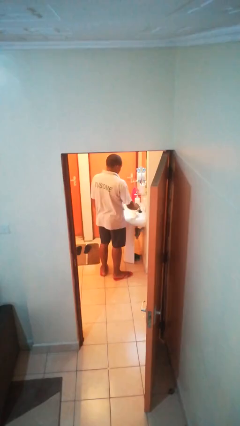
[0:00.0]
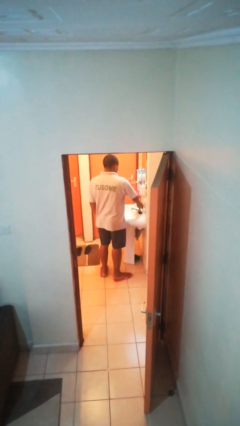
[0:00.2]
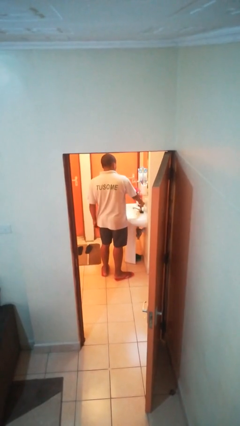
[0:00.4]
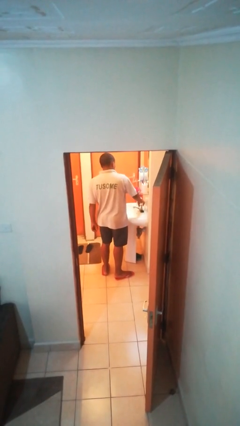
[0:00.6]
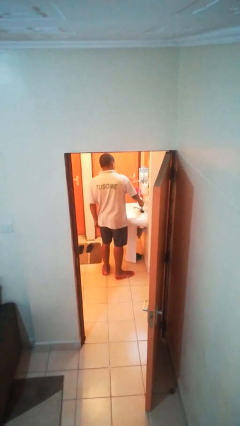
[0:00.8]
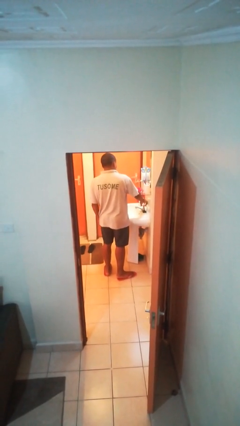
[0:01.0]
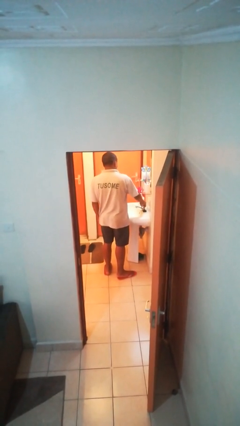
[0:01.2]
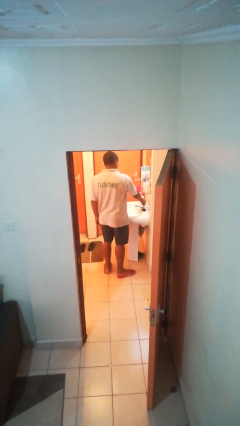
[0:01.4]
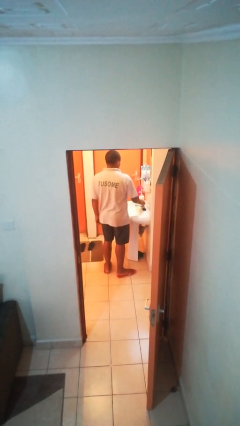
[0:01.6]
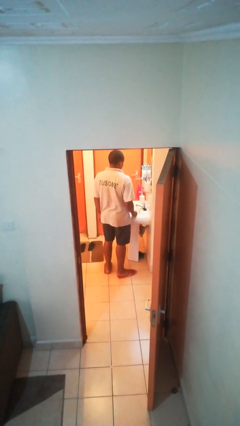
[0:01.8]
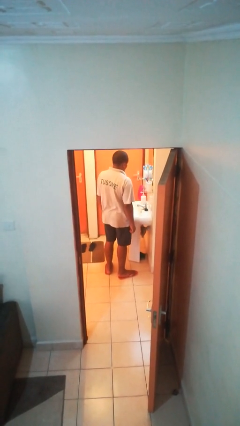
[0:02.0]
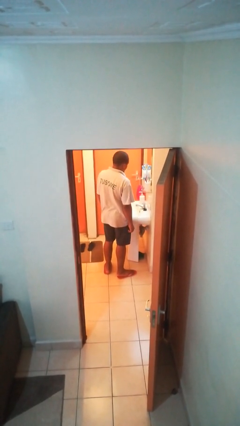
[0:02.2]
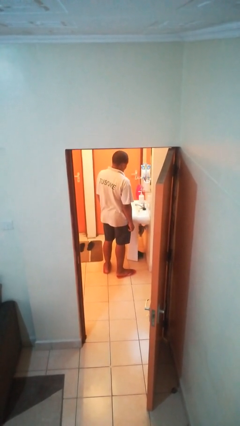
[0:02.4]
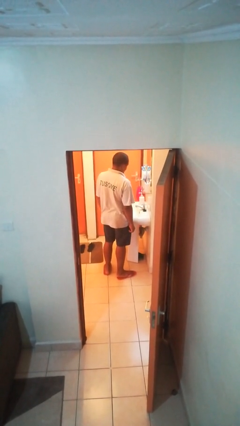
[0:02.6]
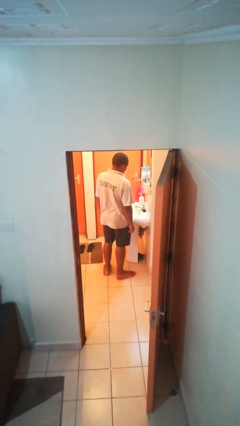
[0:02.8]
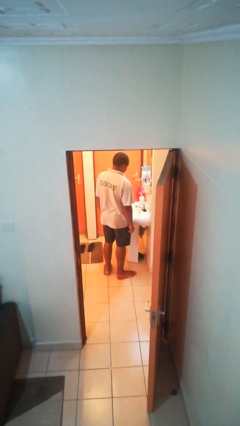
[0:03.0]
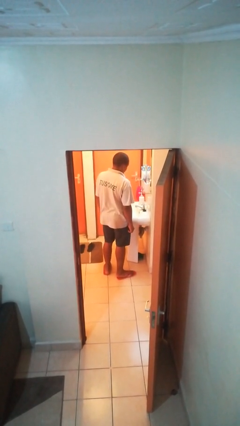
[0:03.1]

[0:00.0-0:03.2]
person turns off faucet

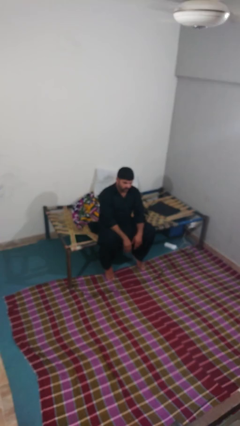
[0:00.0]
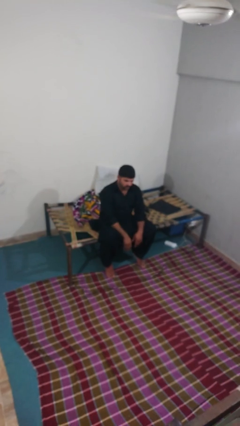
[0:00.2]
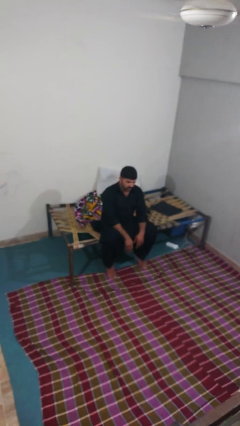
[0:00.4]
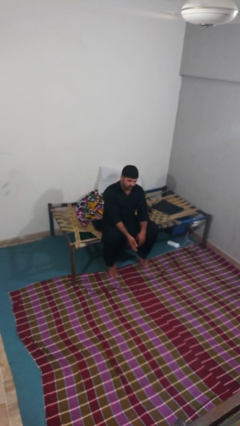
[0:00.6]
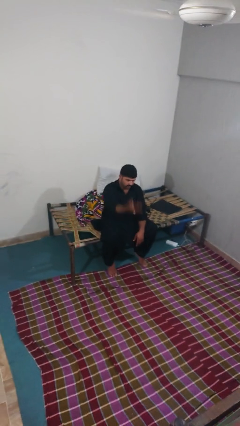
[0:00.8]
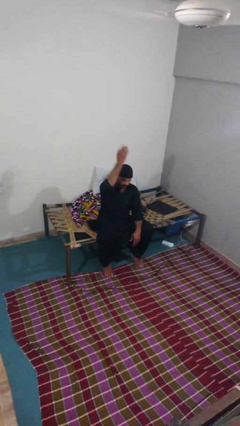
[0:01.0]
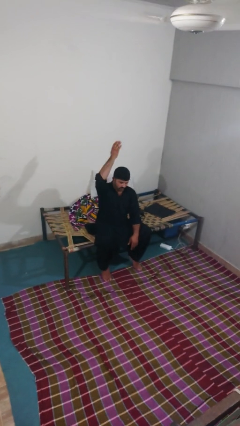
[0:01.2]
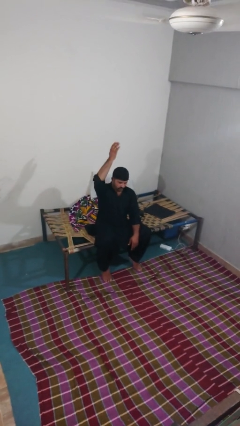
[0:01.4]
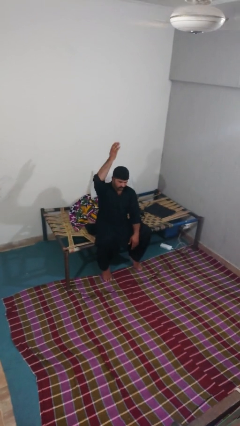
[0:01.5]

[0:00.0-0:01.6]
person gestures swipe up

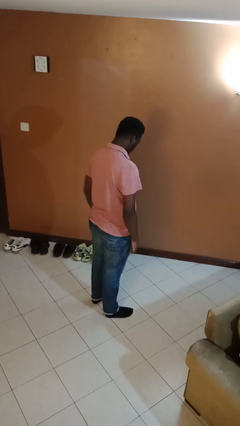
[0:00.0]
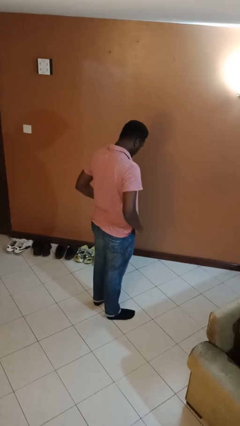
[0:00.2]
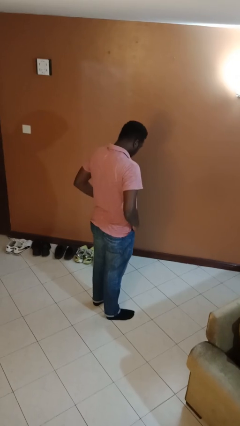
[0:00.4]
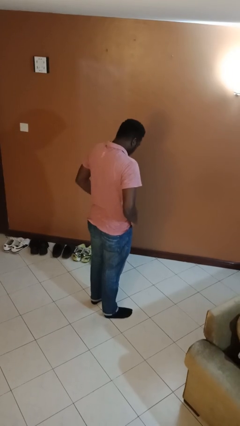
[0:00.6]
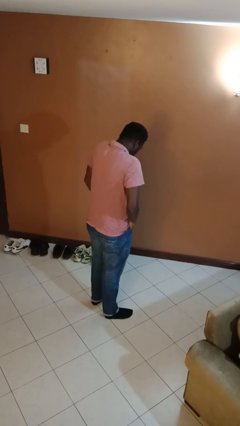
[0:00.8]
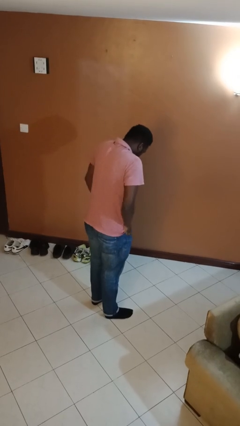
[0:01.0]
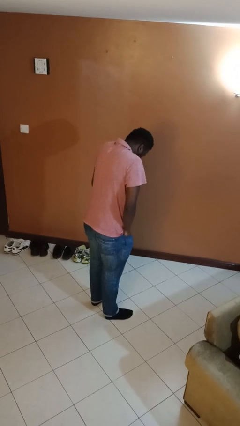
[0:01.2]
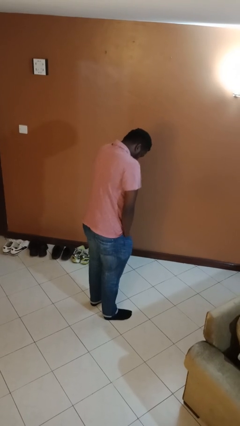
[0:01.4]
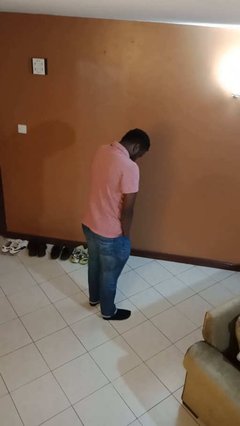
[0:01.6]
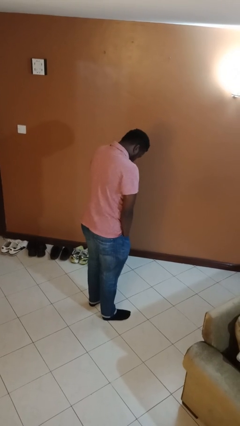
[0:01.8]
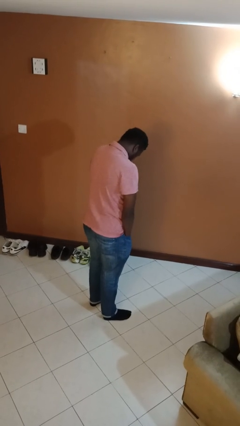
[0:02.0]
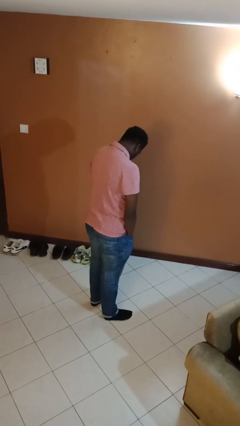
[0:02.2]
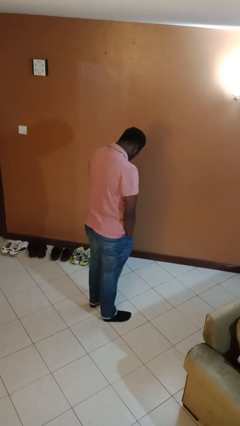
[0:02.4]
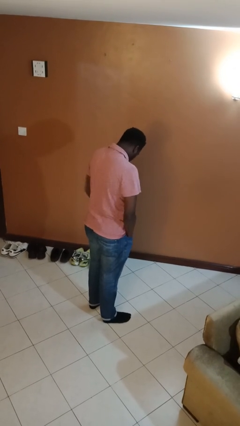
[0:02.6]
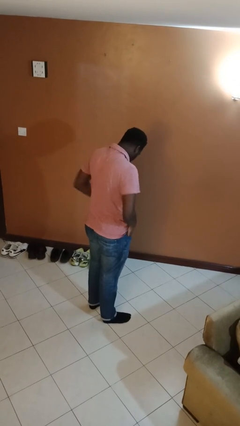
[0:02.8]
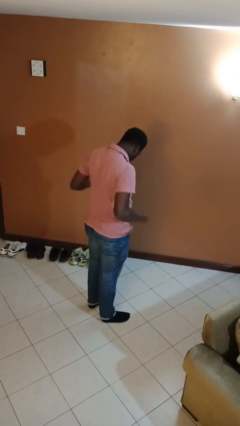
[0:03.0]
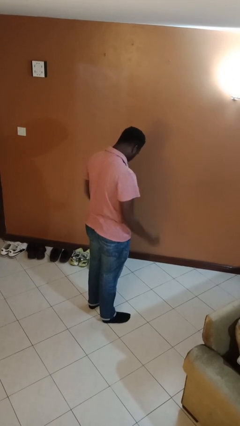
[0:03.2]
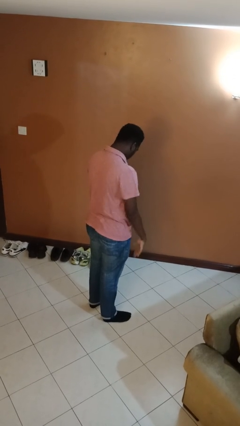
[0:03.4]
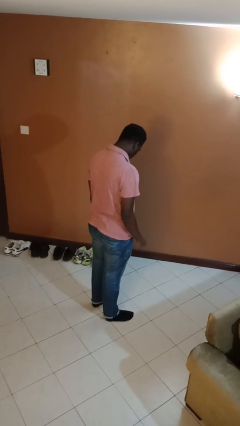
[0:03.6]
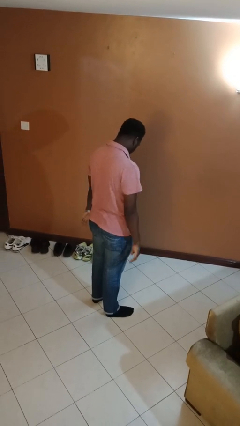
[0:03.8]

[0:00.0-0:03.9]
person puts hands in back pockets

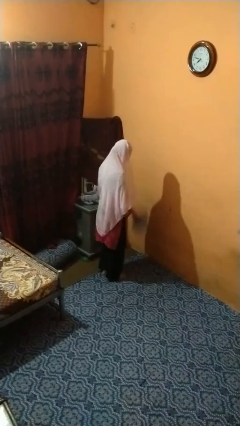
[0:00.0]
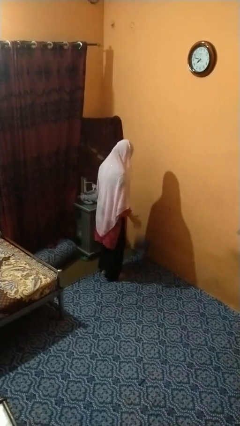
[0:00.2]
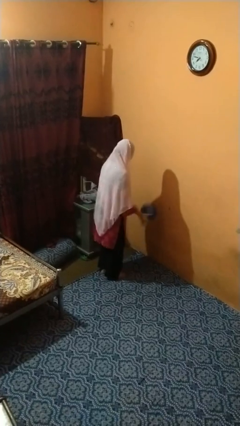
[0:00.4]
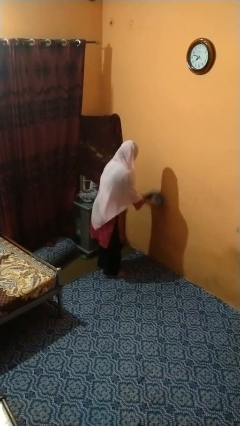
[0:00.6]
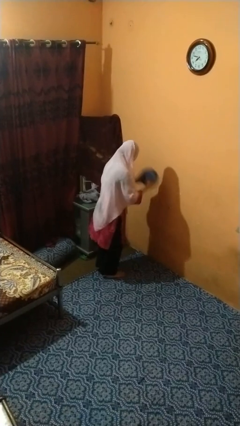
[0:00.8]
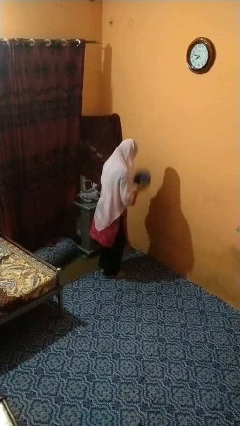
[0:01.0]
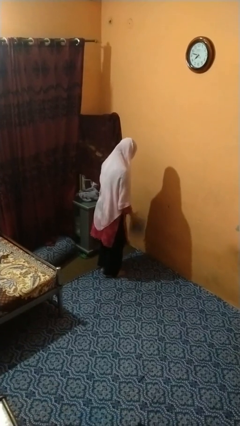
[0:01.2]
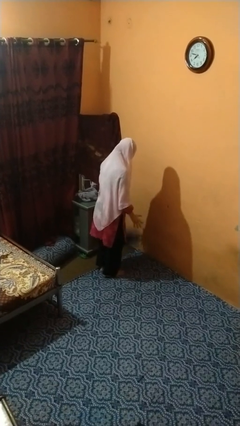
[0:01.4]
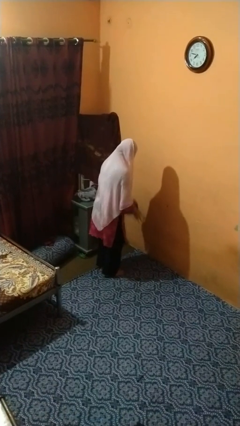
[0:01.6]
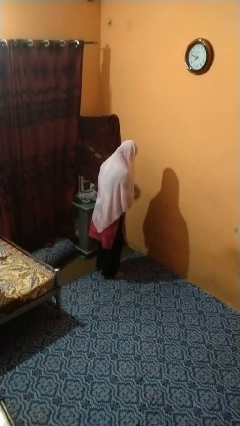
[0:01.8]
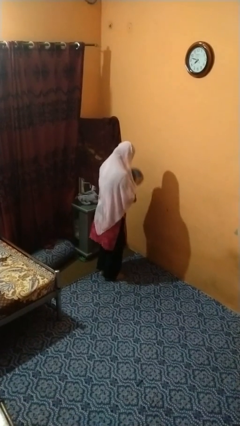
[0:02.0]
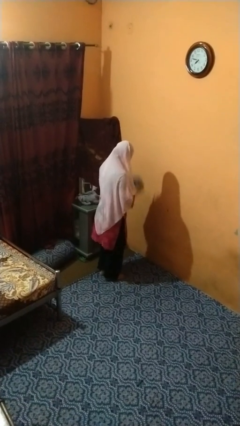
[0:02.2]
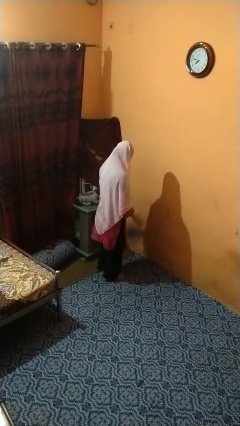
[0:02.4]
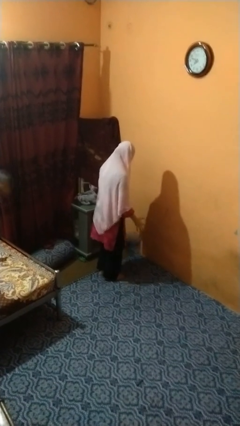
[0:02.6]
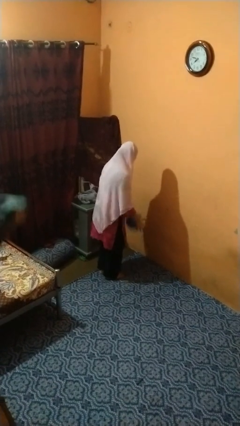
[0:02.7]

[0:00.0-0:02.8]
person bounces ball on floor

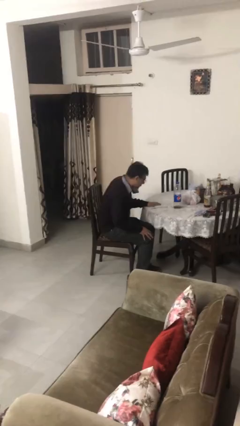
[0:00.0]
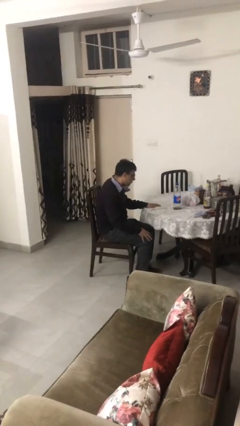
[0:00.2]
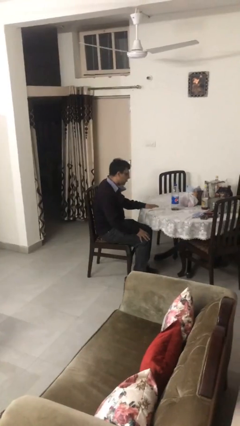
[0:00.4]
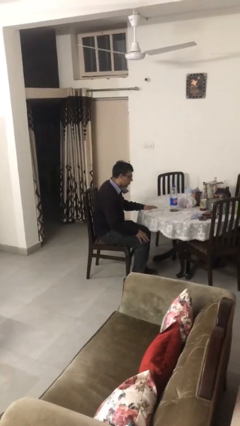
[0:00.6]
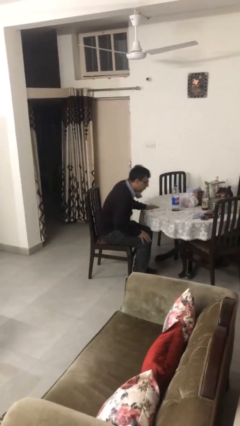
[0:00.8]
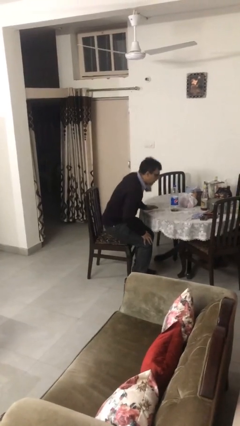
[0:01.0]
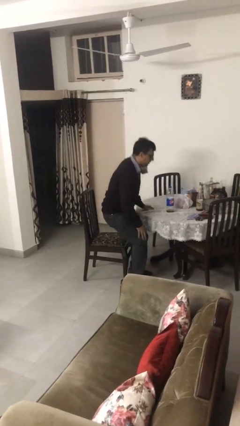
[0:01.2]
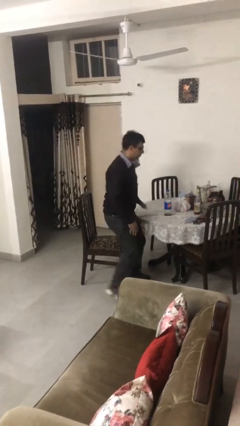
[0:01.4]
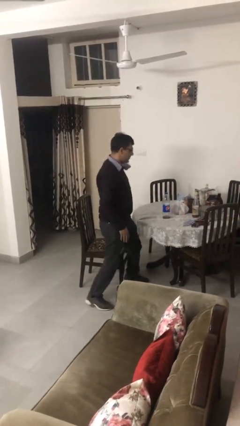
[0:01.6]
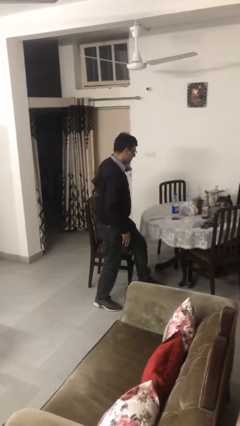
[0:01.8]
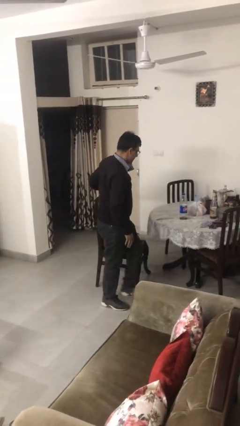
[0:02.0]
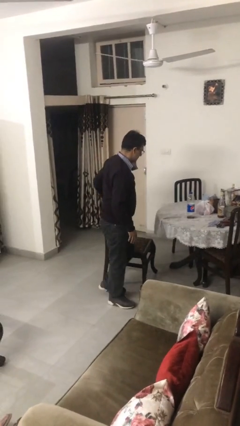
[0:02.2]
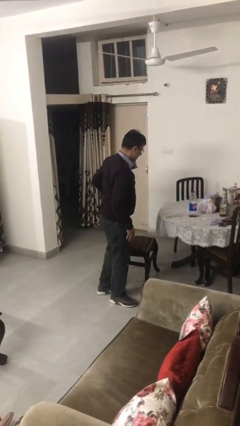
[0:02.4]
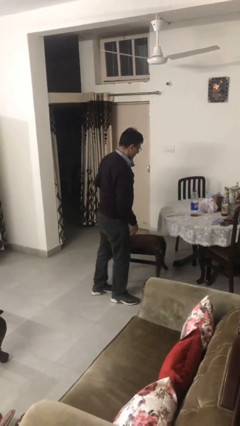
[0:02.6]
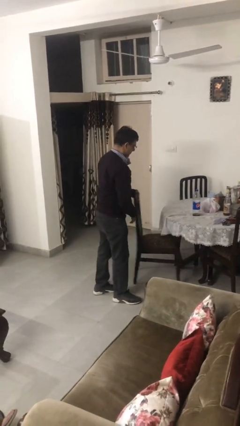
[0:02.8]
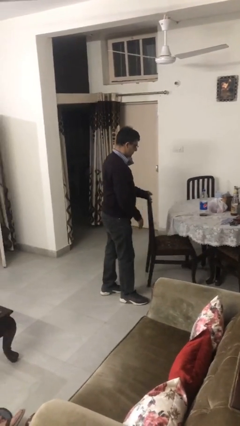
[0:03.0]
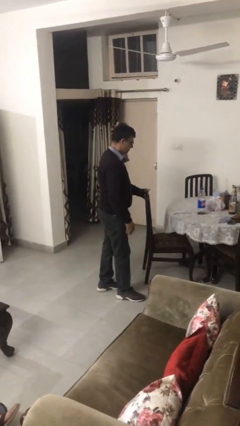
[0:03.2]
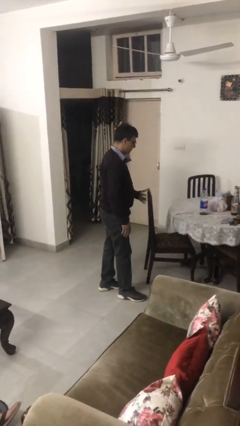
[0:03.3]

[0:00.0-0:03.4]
person stands up

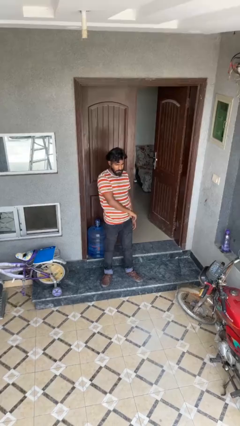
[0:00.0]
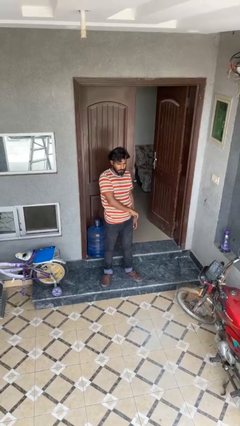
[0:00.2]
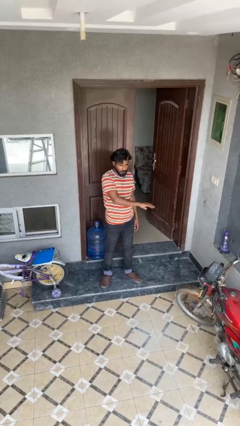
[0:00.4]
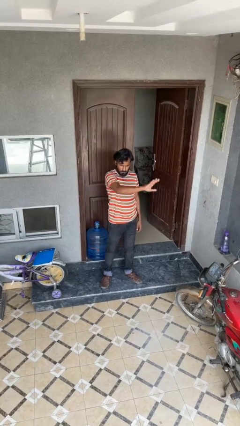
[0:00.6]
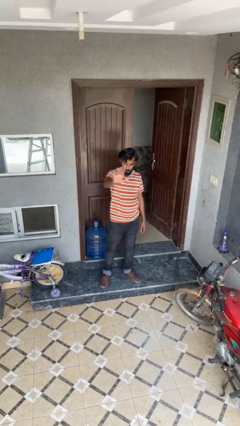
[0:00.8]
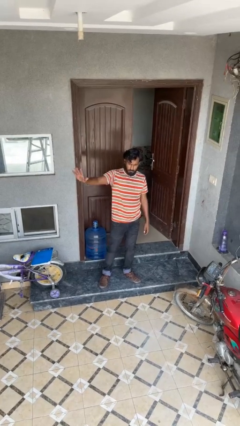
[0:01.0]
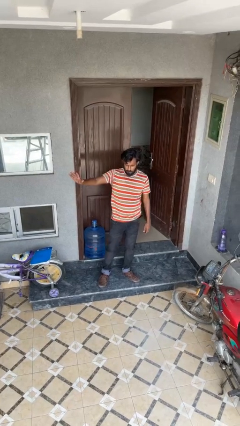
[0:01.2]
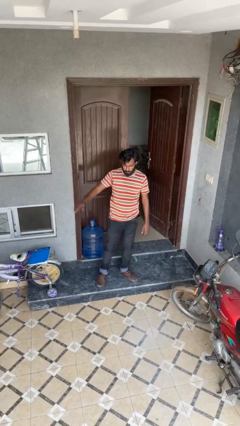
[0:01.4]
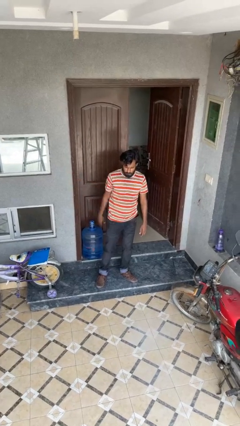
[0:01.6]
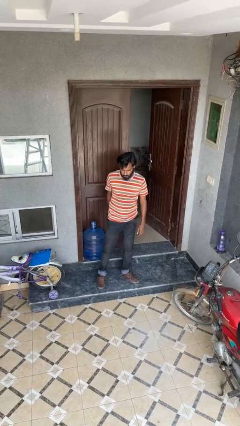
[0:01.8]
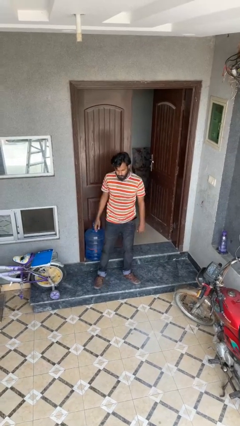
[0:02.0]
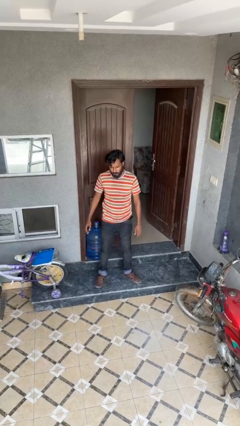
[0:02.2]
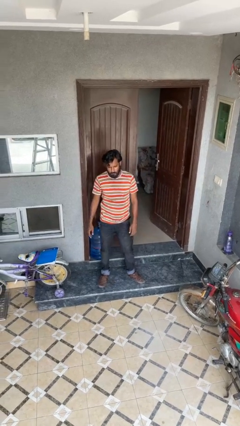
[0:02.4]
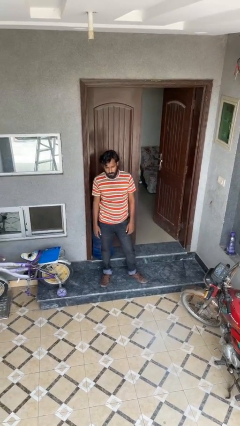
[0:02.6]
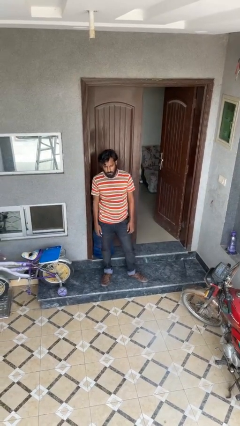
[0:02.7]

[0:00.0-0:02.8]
person gestures swipe right
